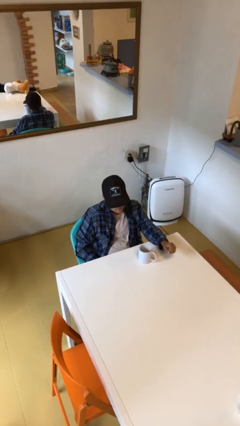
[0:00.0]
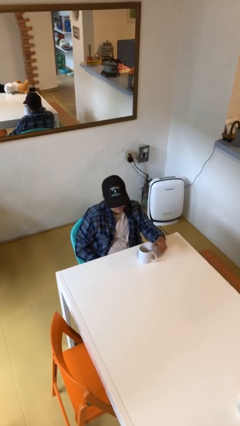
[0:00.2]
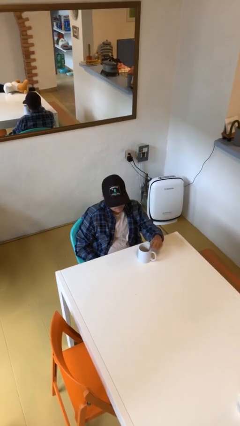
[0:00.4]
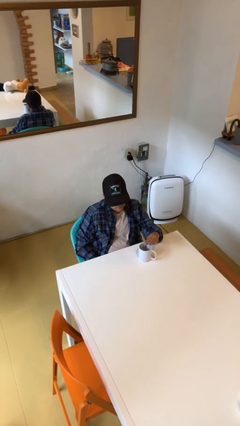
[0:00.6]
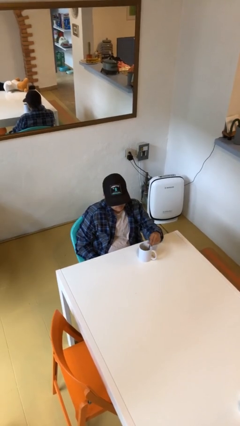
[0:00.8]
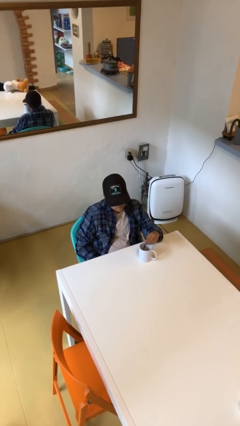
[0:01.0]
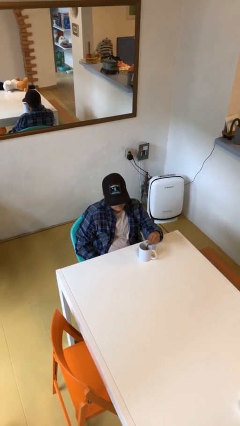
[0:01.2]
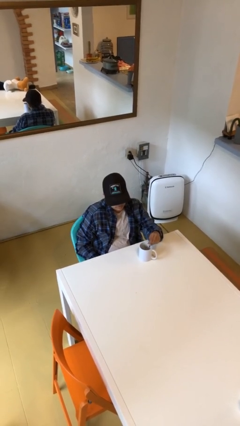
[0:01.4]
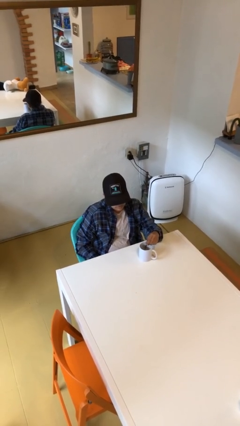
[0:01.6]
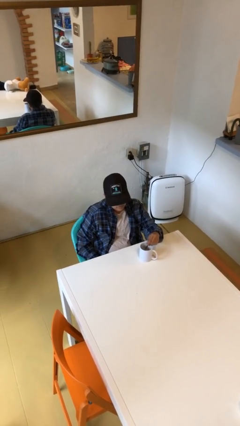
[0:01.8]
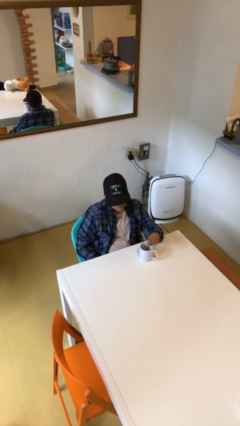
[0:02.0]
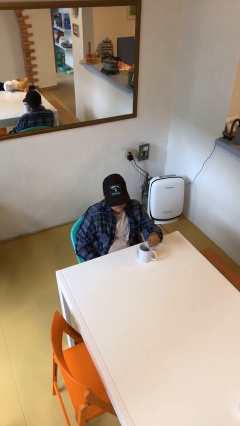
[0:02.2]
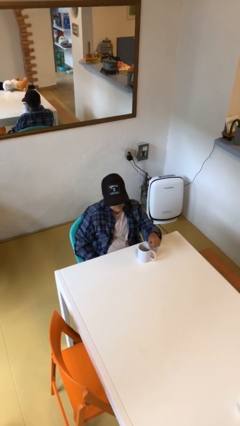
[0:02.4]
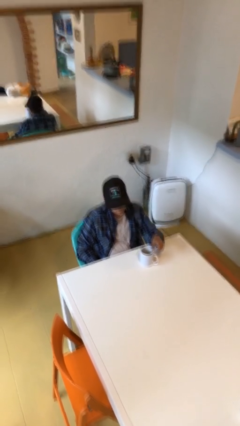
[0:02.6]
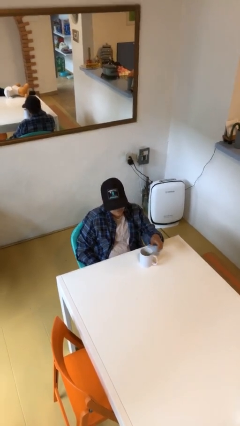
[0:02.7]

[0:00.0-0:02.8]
person stirs mug

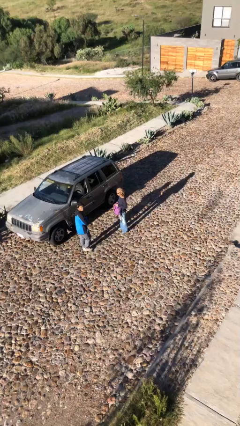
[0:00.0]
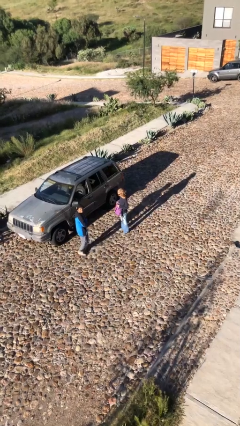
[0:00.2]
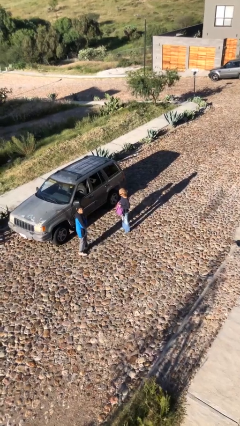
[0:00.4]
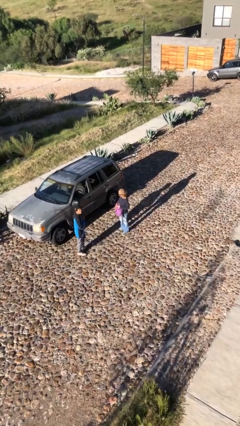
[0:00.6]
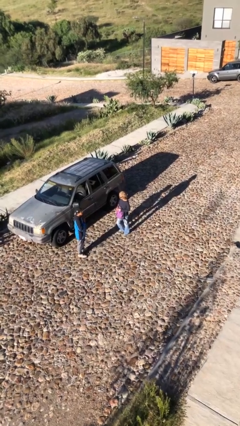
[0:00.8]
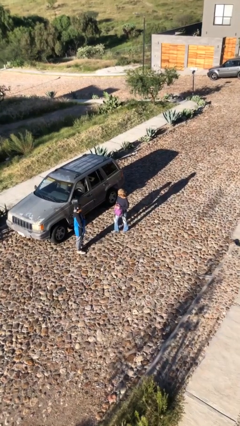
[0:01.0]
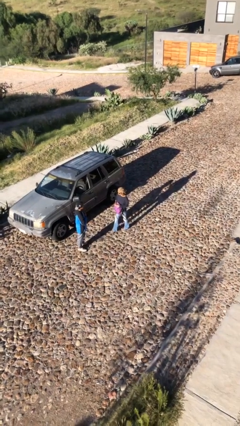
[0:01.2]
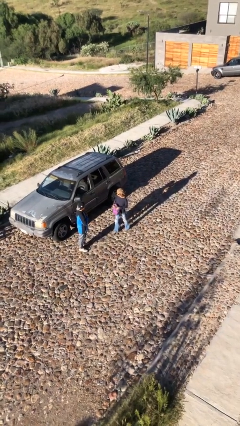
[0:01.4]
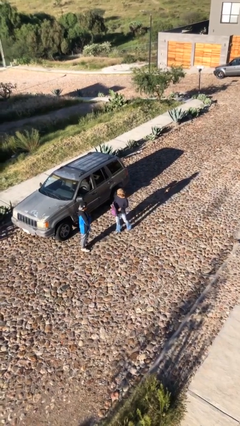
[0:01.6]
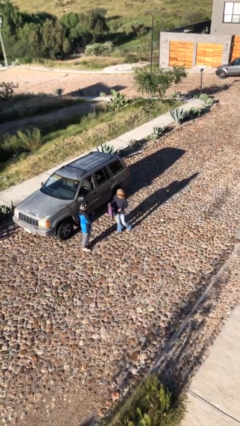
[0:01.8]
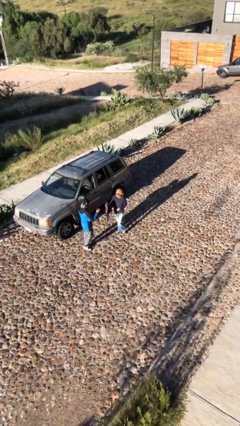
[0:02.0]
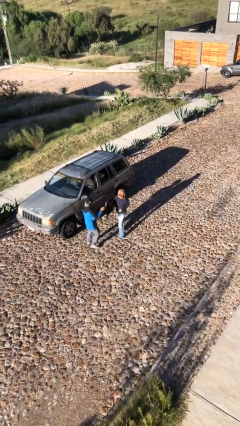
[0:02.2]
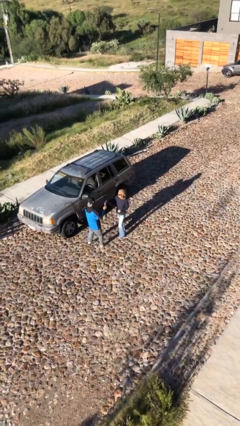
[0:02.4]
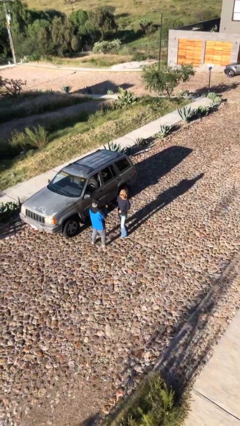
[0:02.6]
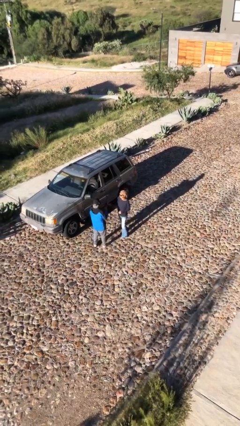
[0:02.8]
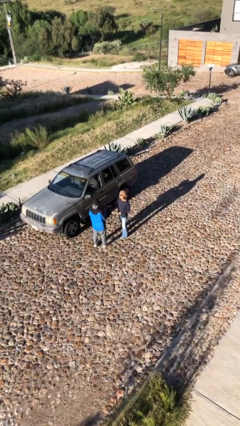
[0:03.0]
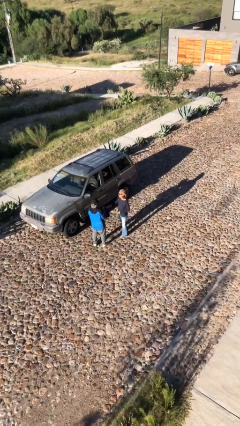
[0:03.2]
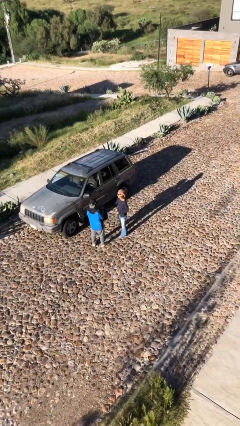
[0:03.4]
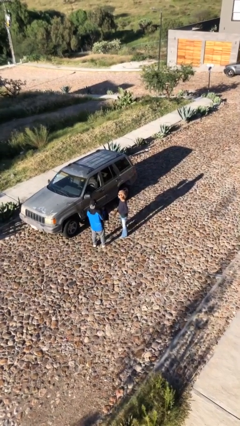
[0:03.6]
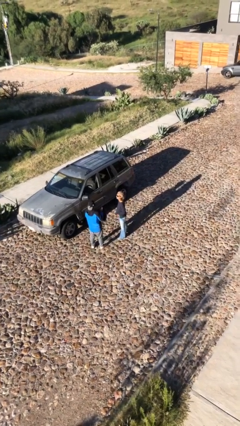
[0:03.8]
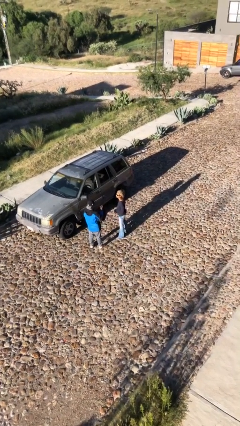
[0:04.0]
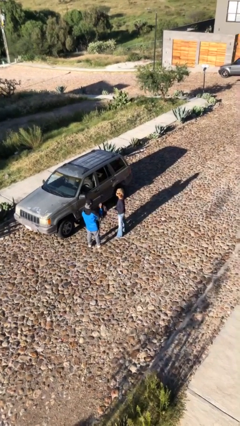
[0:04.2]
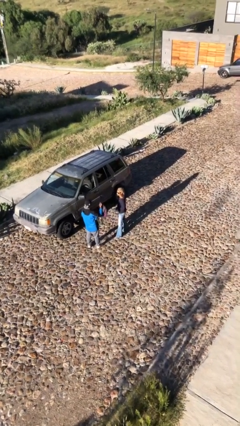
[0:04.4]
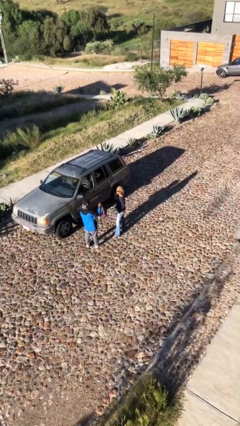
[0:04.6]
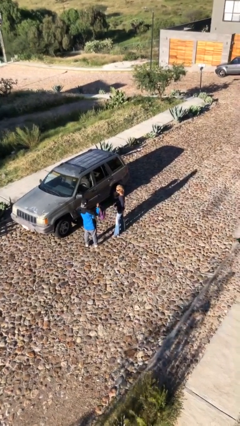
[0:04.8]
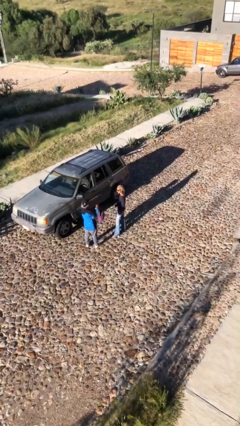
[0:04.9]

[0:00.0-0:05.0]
person transfers object to person

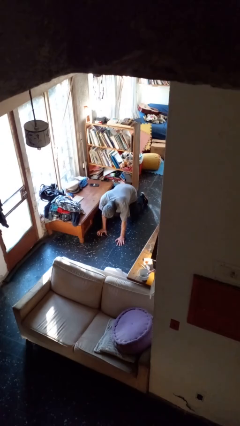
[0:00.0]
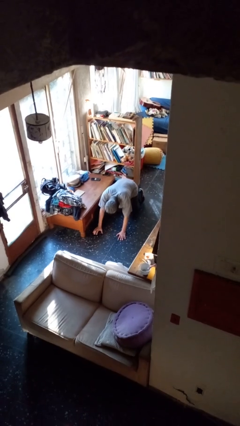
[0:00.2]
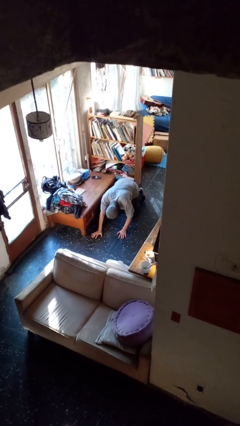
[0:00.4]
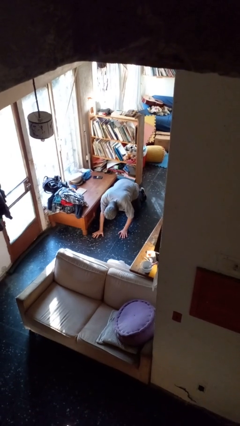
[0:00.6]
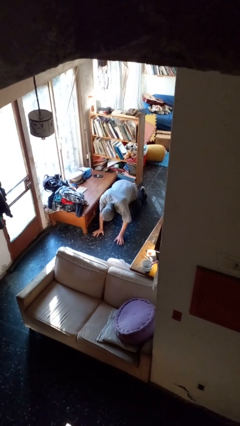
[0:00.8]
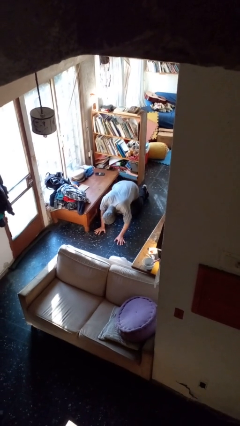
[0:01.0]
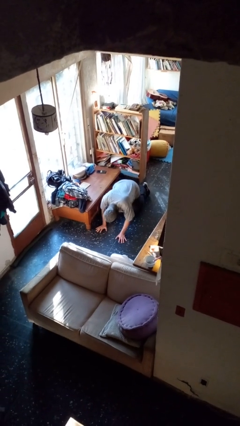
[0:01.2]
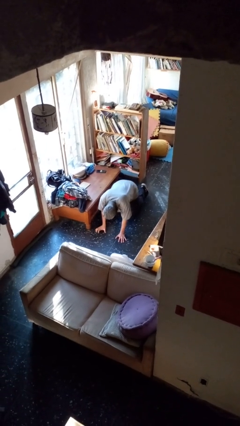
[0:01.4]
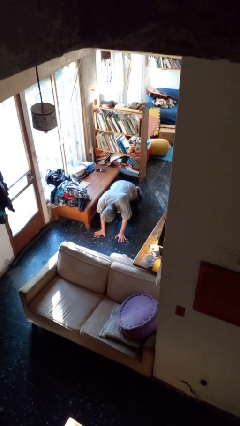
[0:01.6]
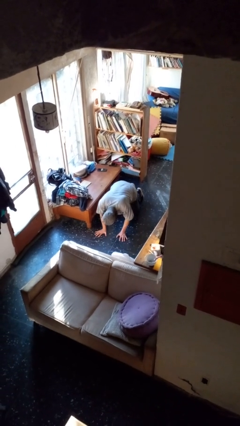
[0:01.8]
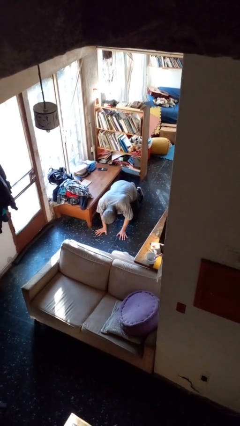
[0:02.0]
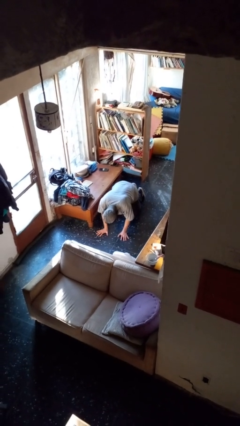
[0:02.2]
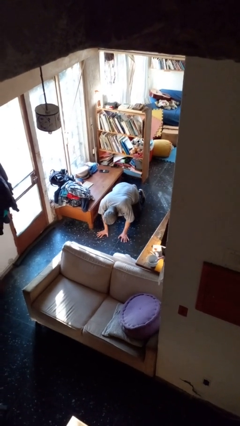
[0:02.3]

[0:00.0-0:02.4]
person crawls

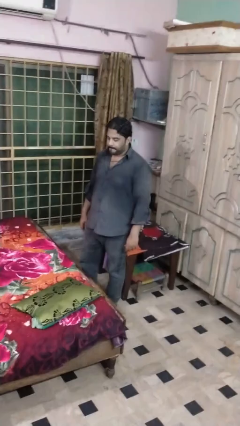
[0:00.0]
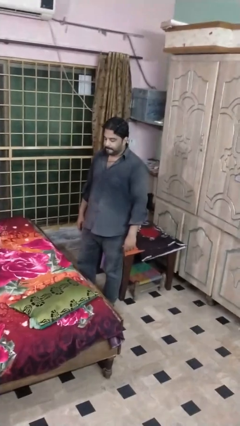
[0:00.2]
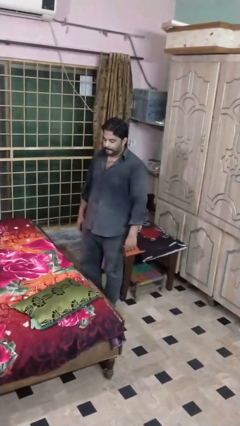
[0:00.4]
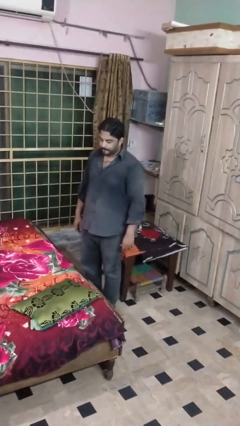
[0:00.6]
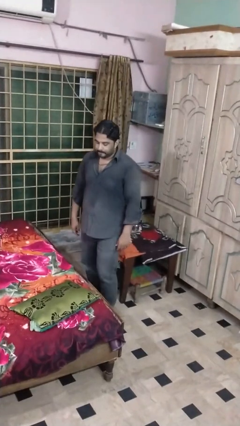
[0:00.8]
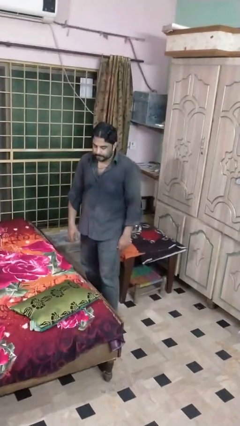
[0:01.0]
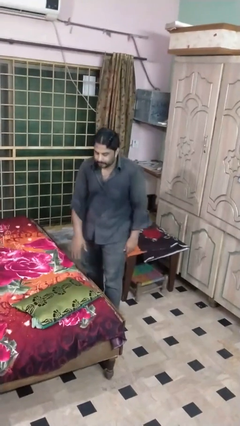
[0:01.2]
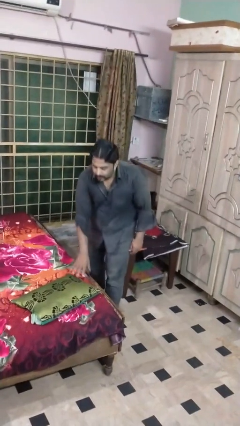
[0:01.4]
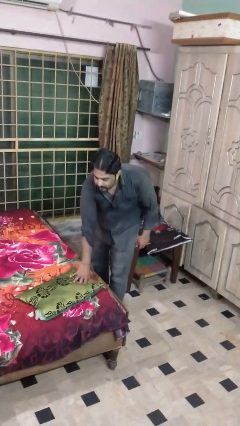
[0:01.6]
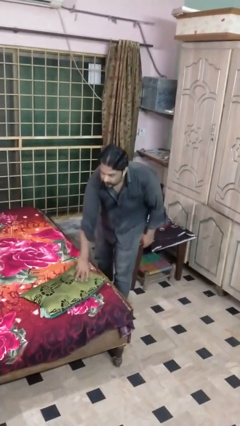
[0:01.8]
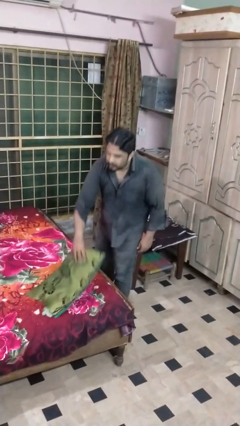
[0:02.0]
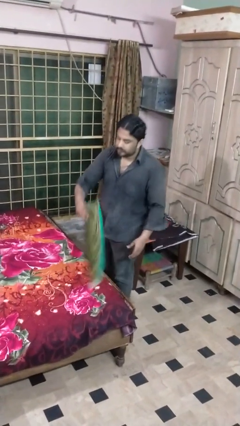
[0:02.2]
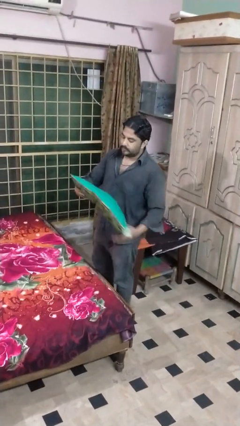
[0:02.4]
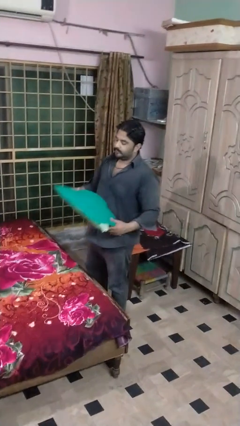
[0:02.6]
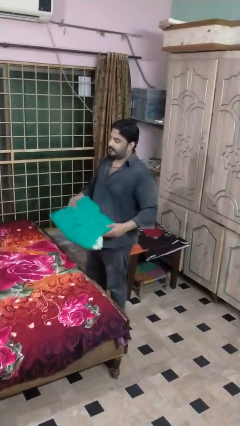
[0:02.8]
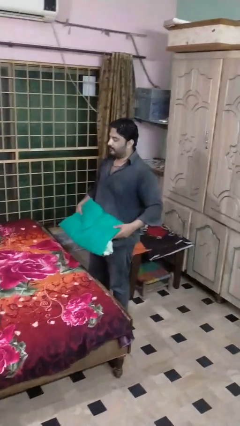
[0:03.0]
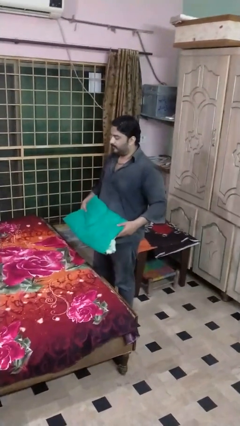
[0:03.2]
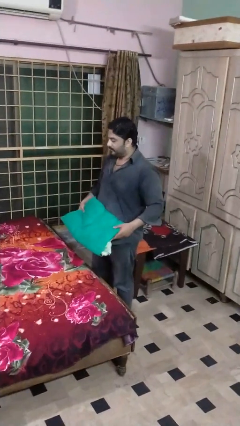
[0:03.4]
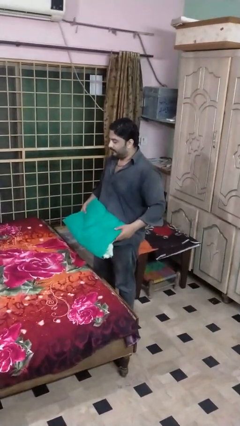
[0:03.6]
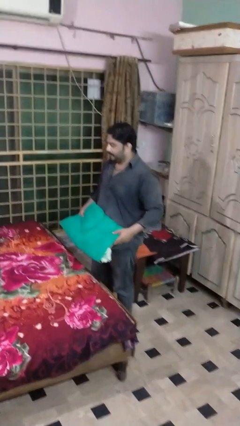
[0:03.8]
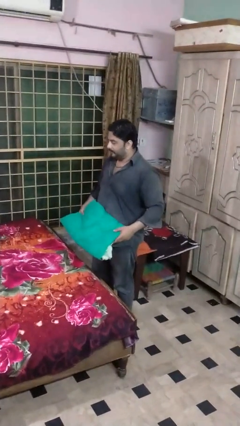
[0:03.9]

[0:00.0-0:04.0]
person picks up object from bed

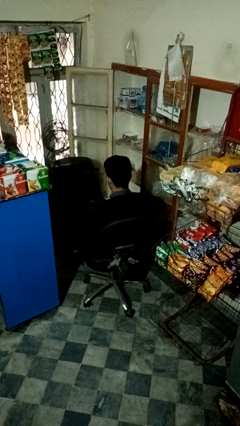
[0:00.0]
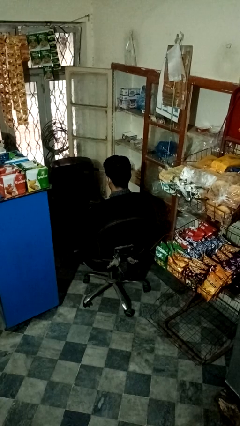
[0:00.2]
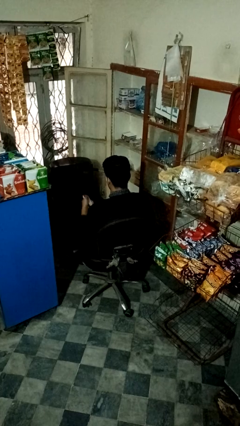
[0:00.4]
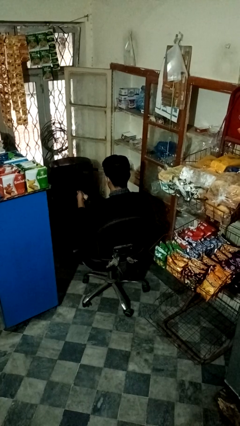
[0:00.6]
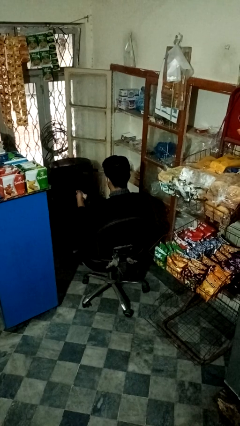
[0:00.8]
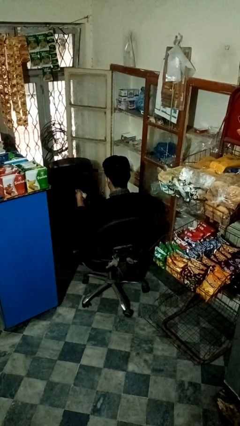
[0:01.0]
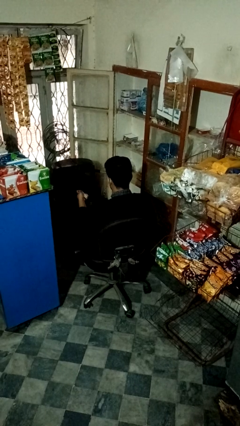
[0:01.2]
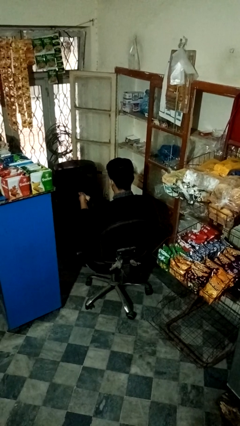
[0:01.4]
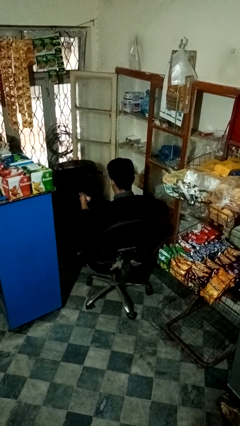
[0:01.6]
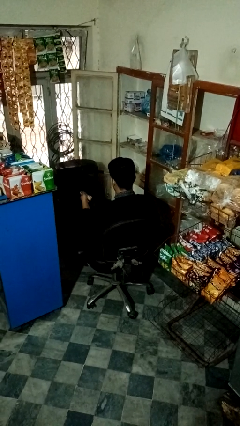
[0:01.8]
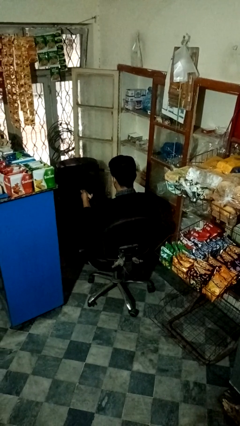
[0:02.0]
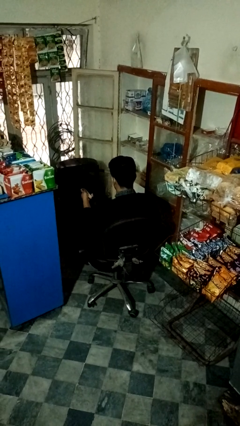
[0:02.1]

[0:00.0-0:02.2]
person uses television remote

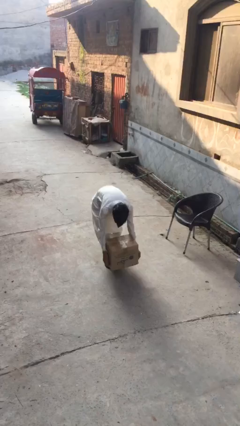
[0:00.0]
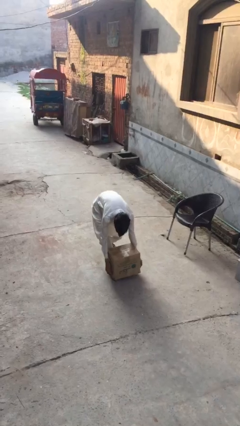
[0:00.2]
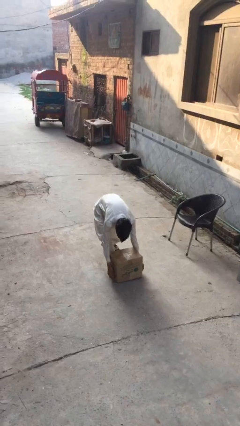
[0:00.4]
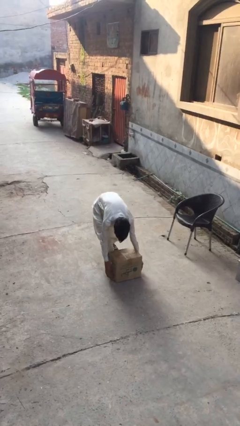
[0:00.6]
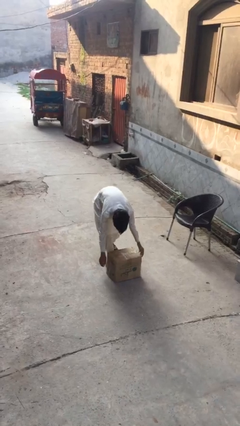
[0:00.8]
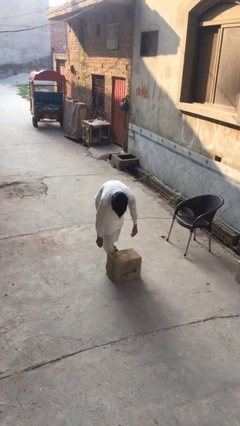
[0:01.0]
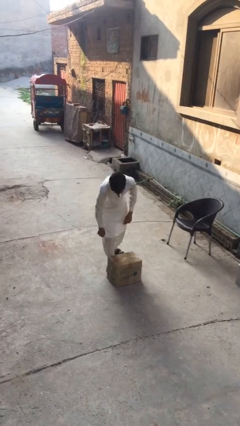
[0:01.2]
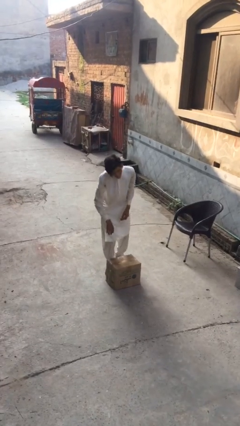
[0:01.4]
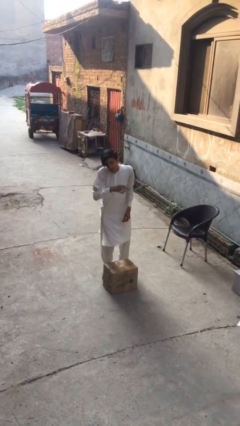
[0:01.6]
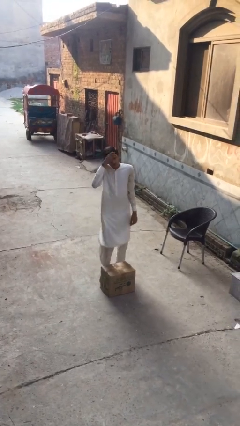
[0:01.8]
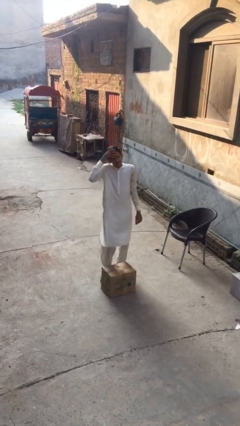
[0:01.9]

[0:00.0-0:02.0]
person puts down object on floor
